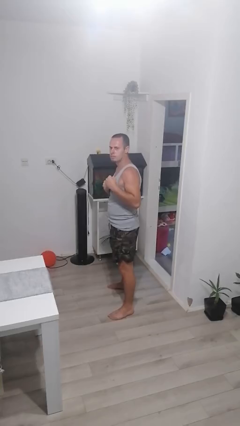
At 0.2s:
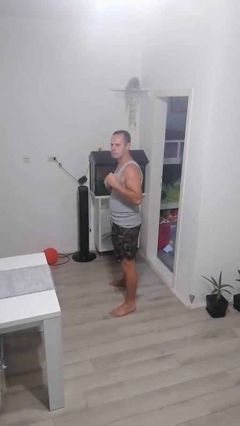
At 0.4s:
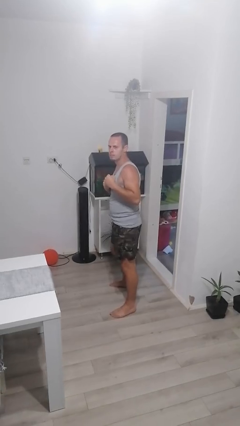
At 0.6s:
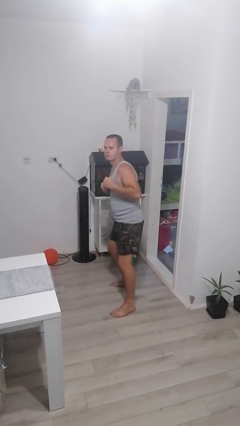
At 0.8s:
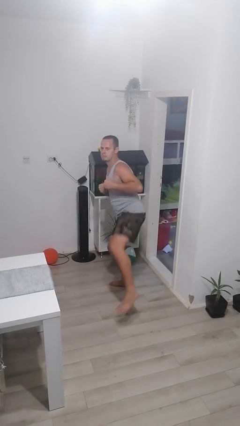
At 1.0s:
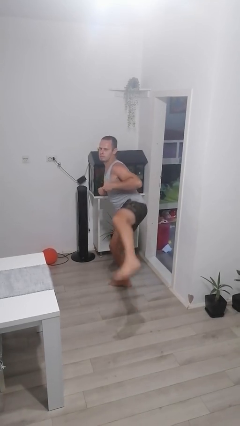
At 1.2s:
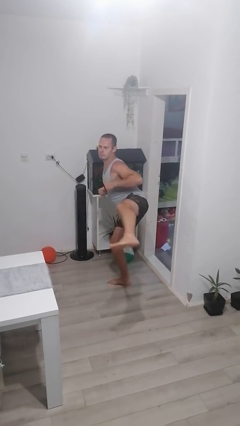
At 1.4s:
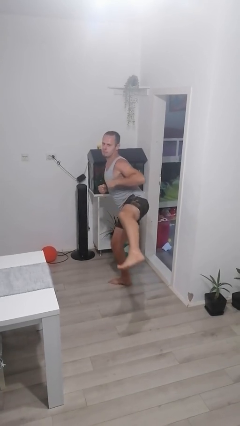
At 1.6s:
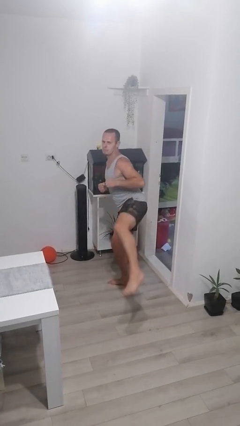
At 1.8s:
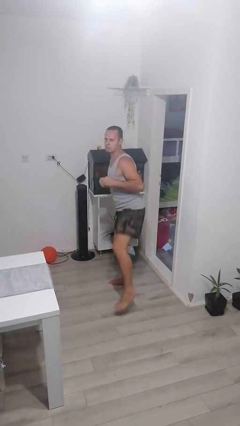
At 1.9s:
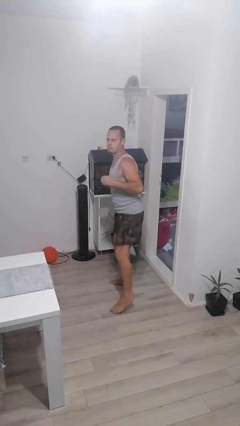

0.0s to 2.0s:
person karate kicks

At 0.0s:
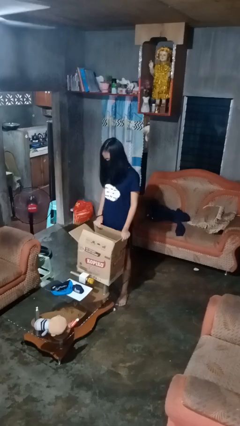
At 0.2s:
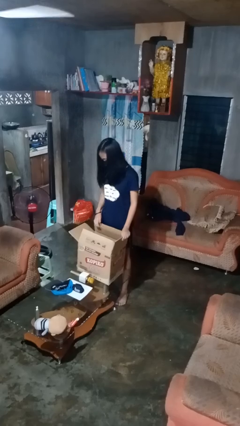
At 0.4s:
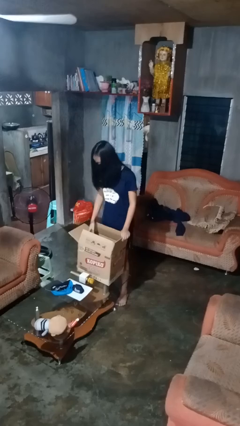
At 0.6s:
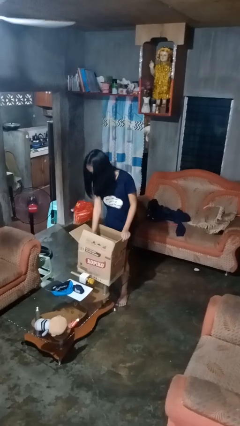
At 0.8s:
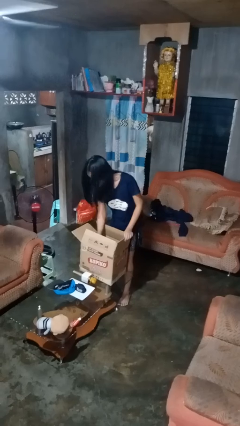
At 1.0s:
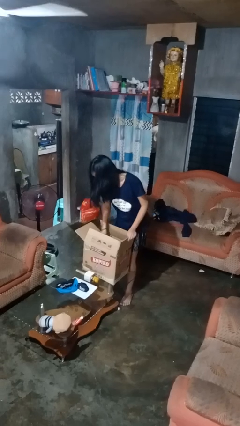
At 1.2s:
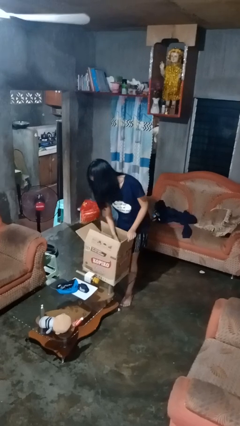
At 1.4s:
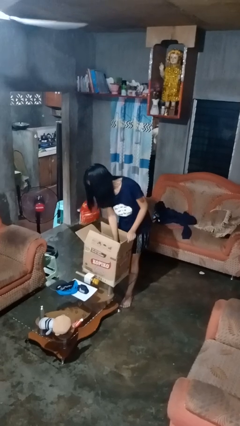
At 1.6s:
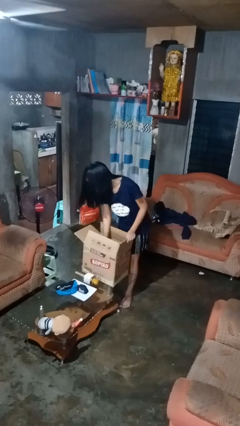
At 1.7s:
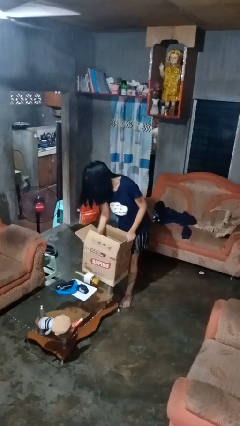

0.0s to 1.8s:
person searches in box

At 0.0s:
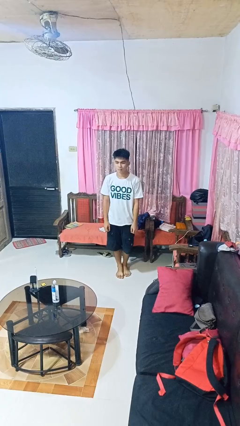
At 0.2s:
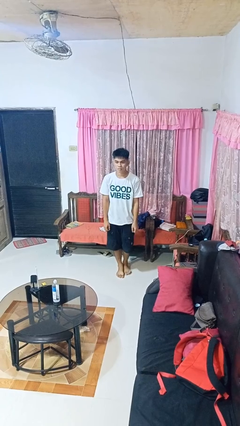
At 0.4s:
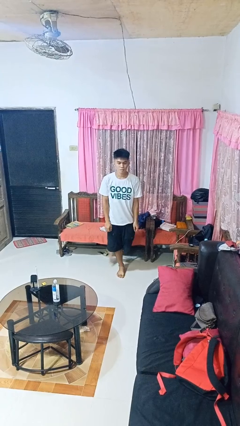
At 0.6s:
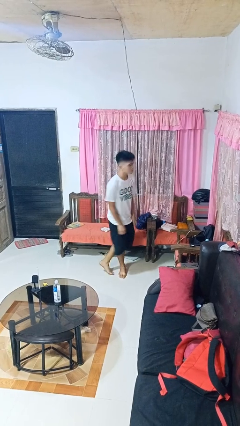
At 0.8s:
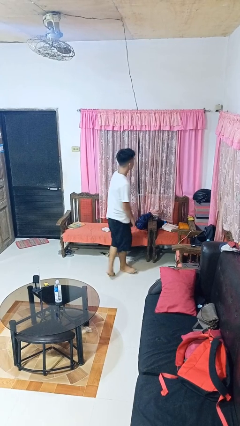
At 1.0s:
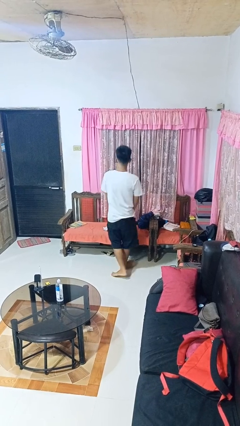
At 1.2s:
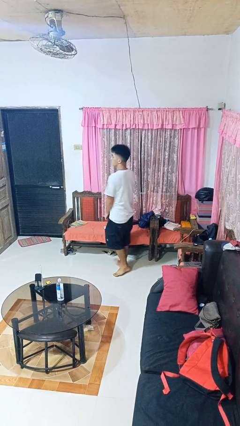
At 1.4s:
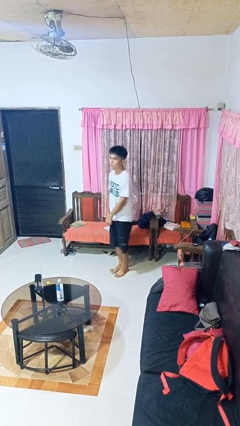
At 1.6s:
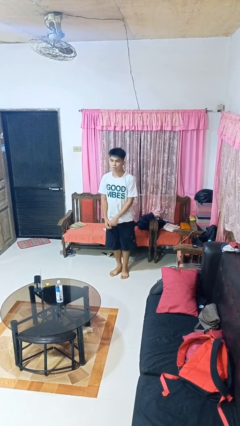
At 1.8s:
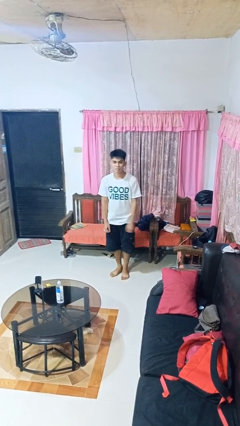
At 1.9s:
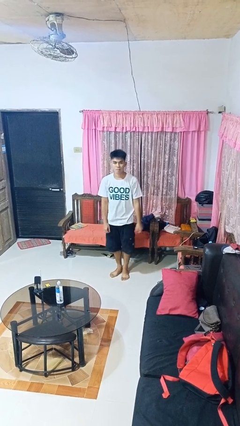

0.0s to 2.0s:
person twirls

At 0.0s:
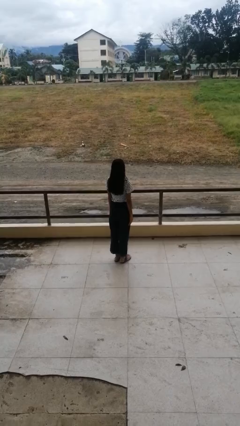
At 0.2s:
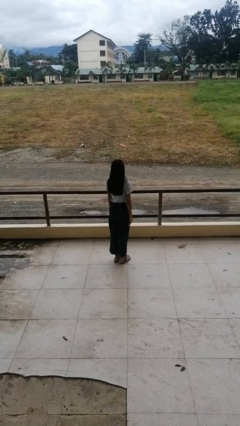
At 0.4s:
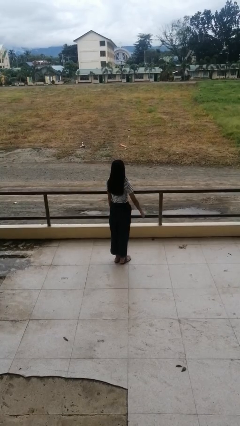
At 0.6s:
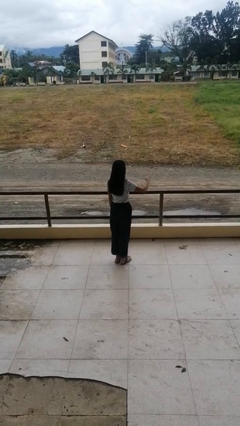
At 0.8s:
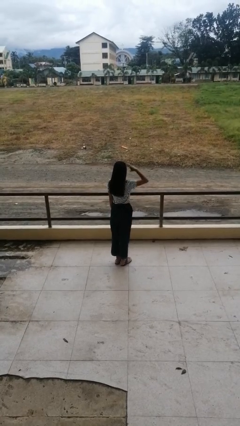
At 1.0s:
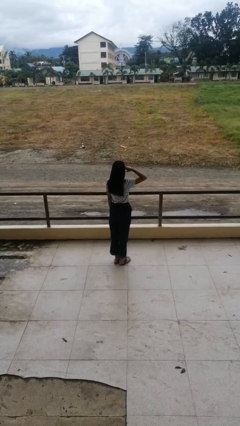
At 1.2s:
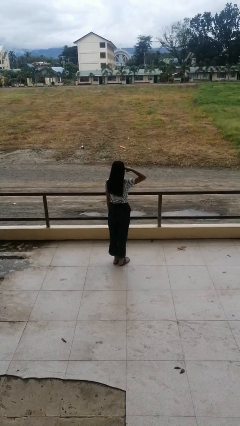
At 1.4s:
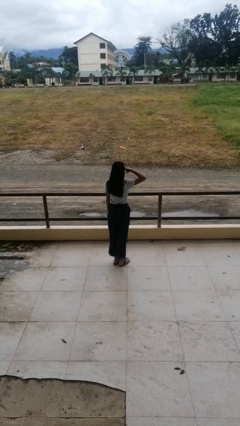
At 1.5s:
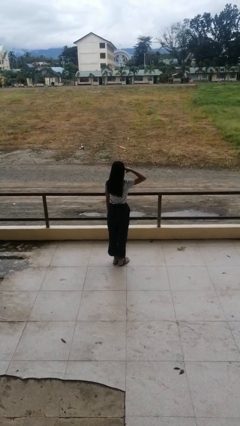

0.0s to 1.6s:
person salutes

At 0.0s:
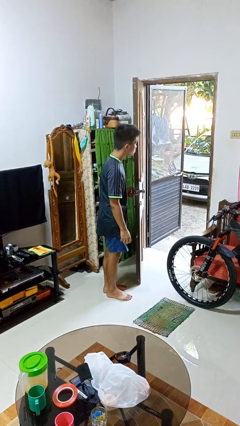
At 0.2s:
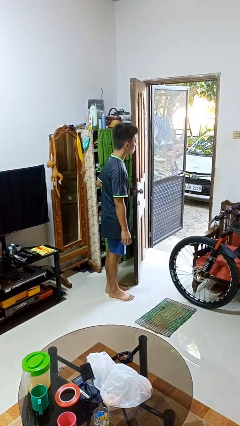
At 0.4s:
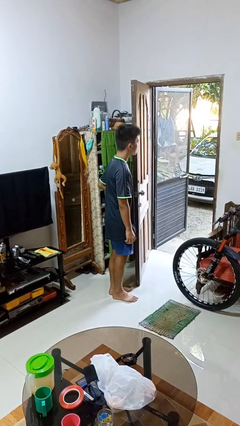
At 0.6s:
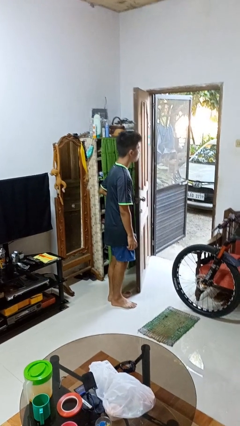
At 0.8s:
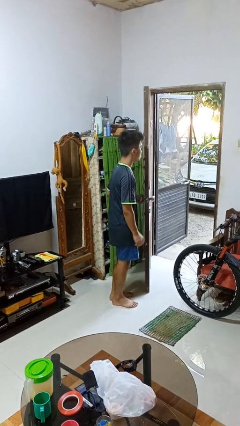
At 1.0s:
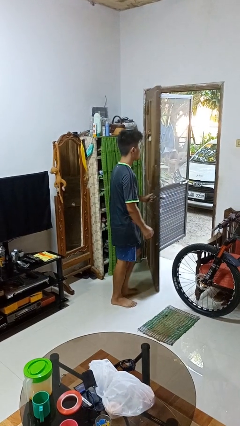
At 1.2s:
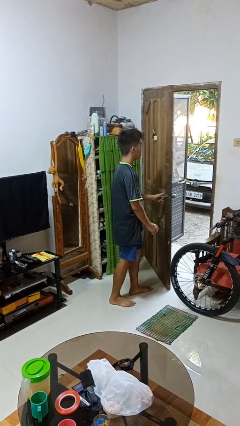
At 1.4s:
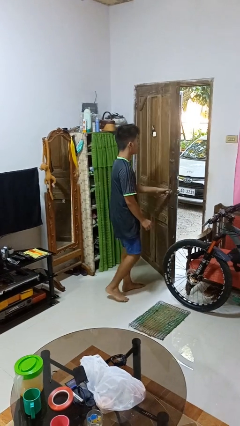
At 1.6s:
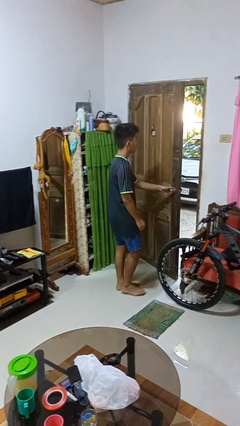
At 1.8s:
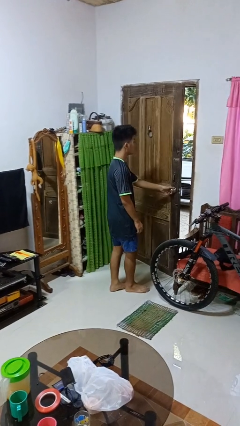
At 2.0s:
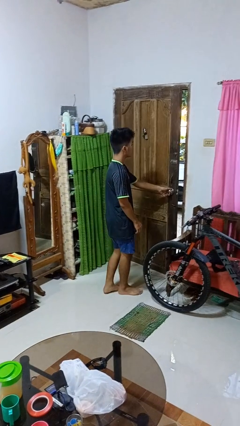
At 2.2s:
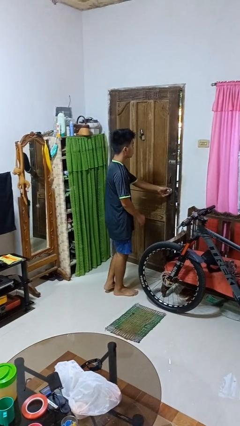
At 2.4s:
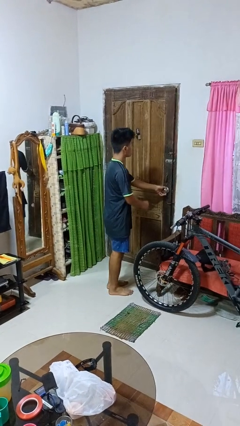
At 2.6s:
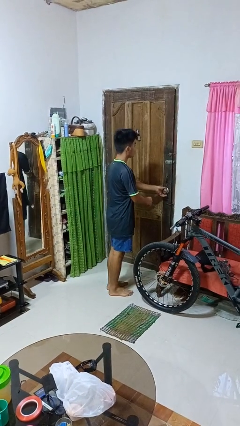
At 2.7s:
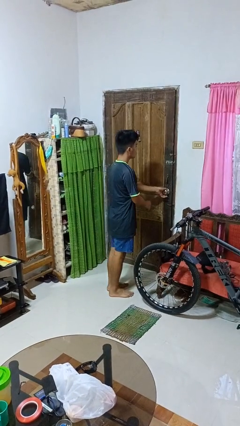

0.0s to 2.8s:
person closes facility door

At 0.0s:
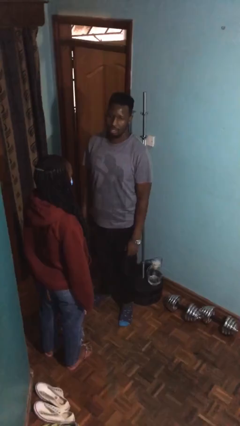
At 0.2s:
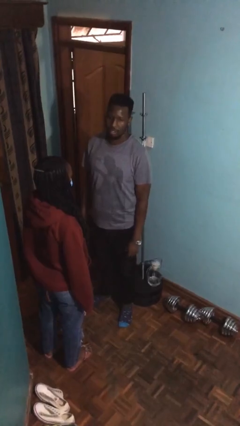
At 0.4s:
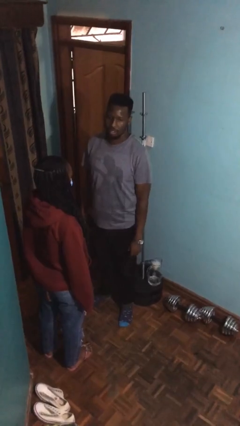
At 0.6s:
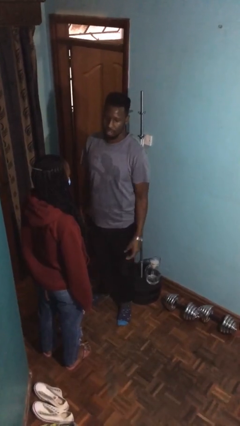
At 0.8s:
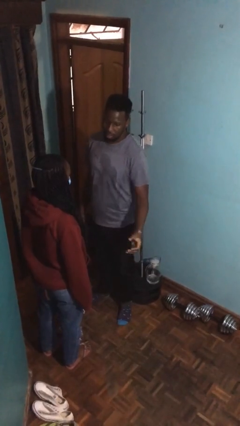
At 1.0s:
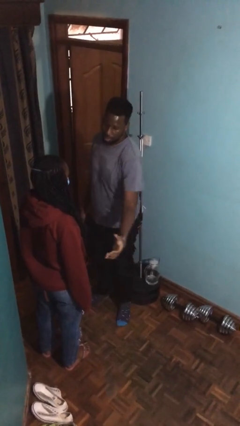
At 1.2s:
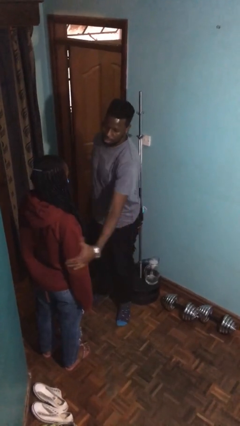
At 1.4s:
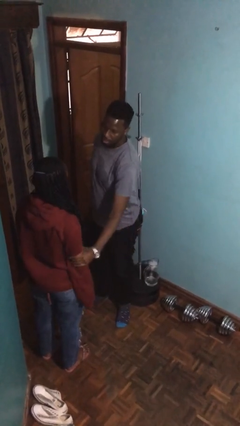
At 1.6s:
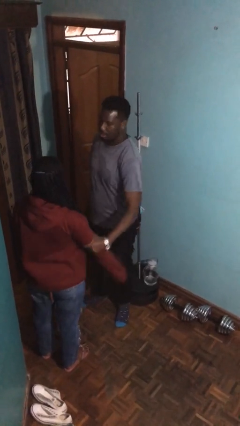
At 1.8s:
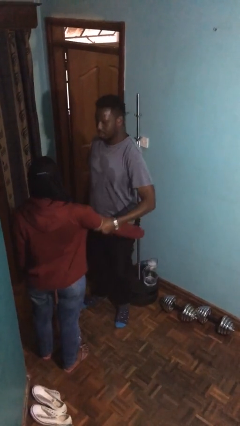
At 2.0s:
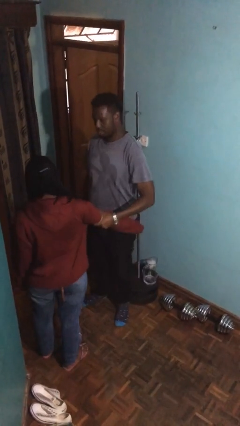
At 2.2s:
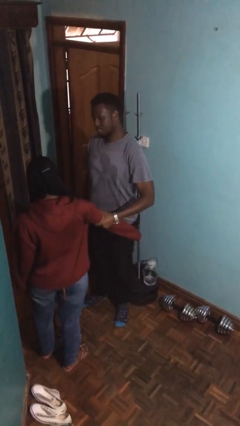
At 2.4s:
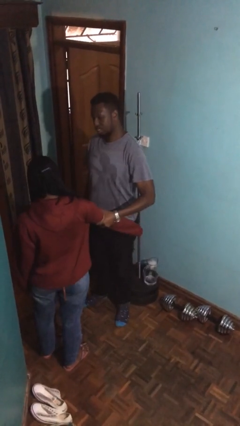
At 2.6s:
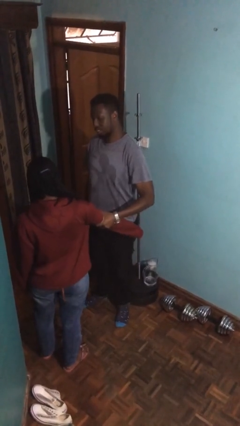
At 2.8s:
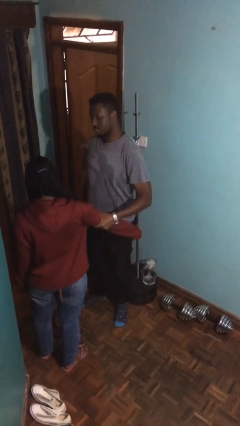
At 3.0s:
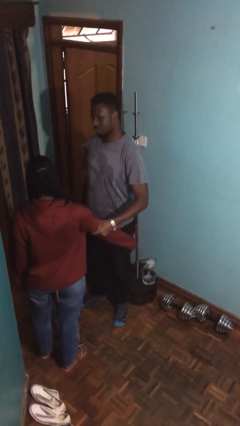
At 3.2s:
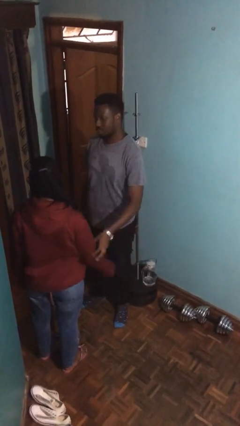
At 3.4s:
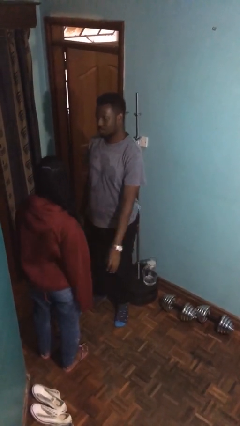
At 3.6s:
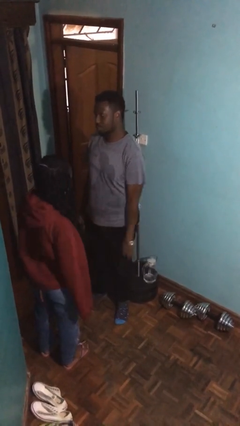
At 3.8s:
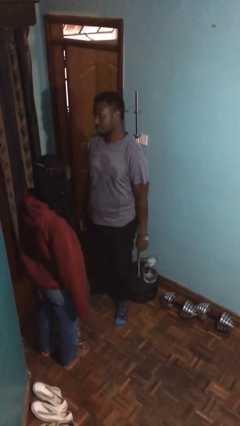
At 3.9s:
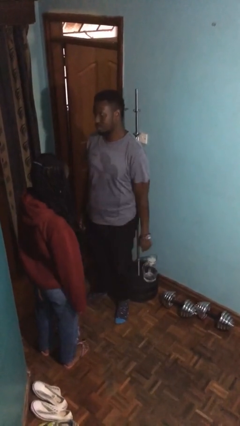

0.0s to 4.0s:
person grabs person by bicep

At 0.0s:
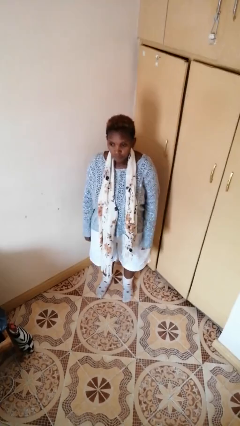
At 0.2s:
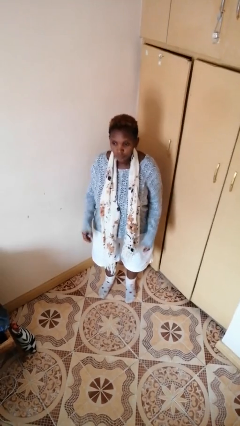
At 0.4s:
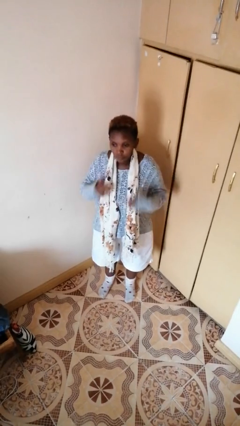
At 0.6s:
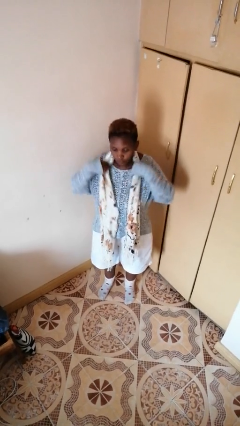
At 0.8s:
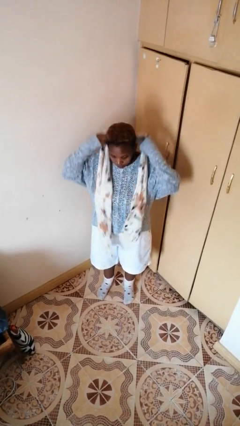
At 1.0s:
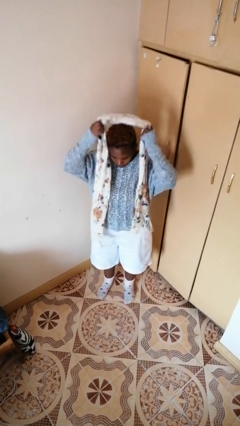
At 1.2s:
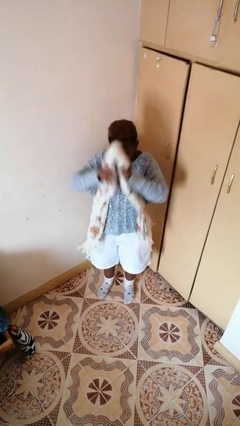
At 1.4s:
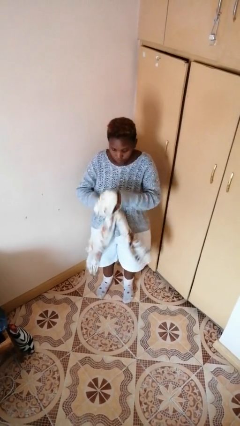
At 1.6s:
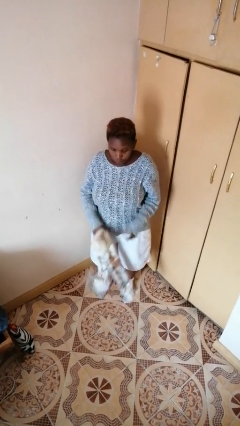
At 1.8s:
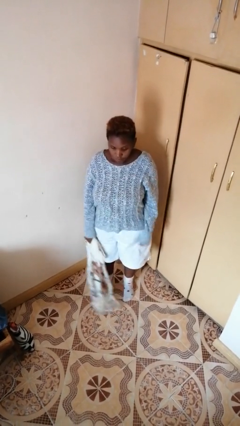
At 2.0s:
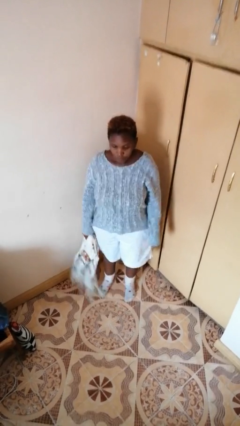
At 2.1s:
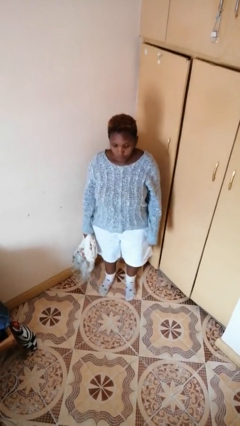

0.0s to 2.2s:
person takes off scarf

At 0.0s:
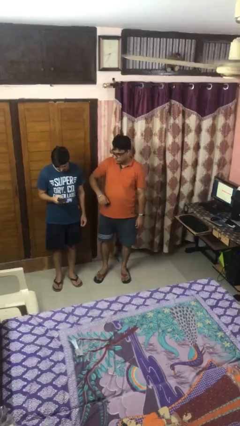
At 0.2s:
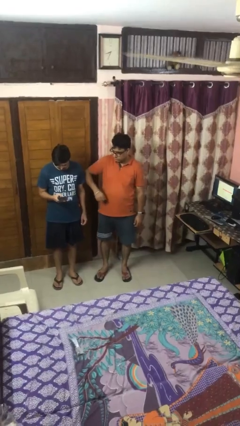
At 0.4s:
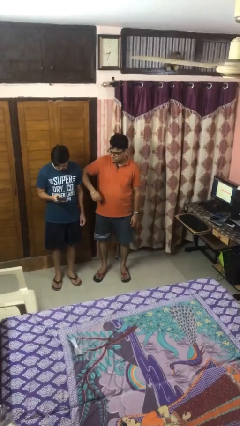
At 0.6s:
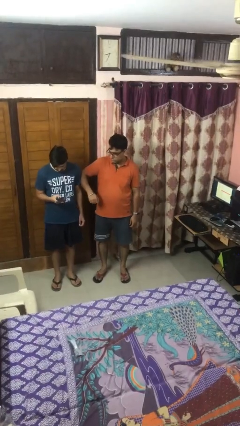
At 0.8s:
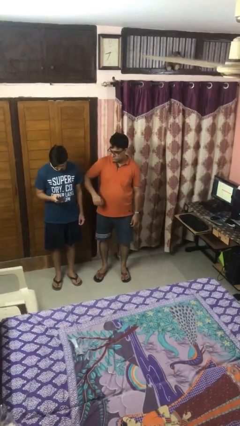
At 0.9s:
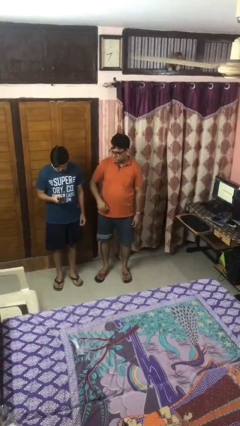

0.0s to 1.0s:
person nudges person with elbow
